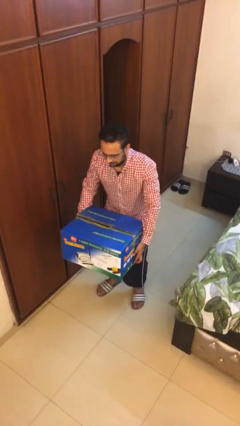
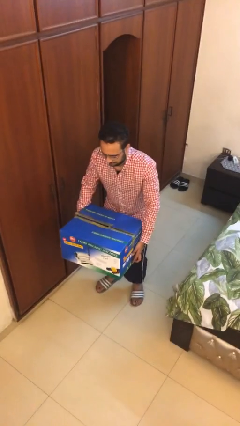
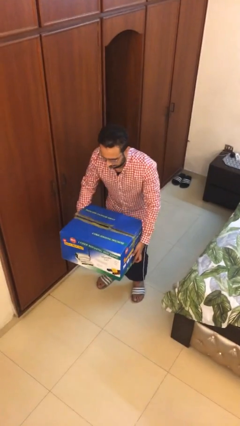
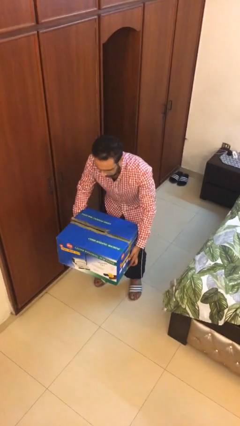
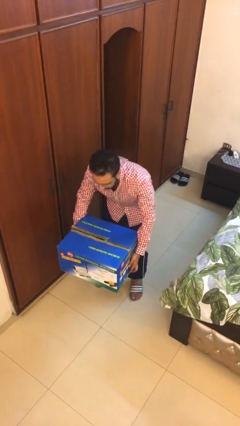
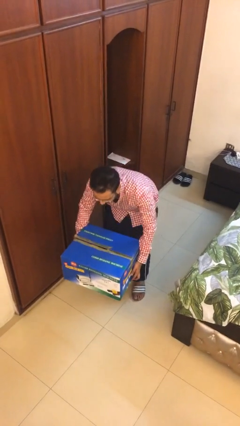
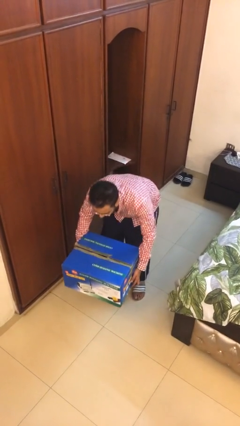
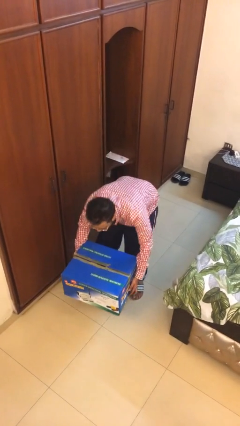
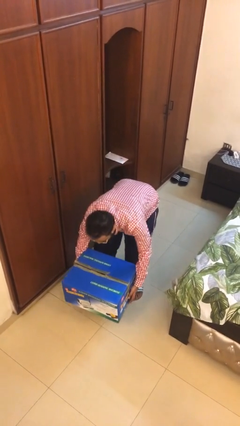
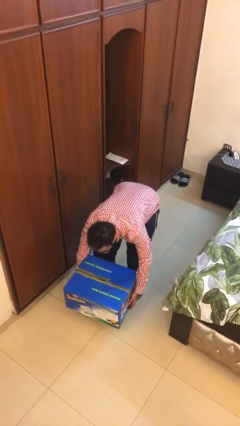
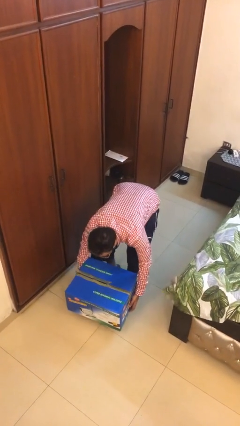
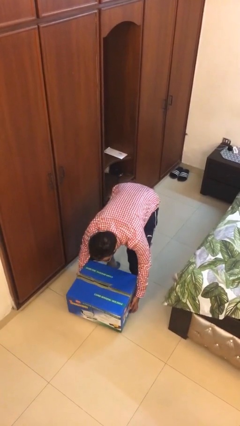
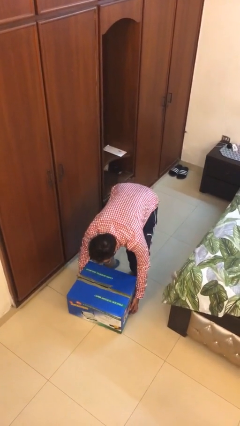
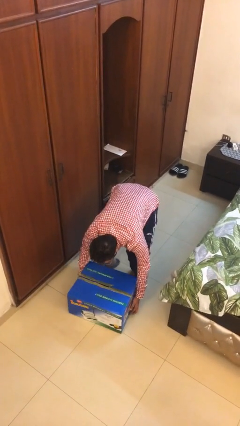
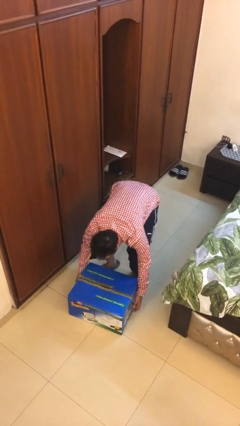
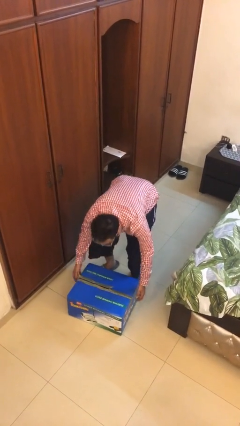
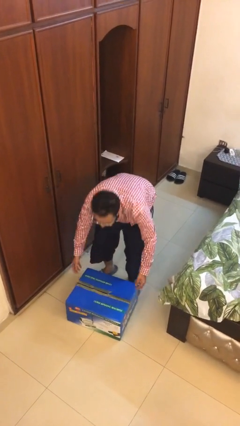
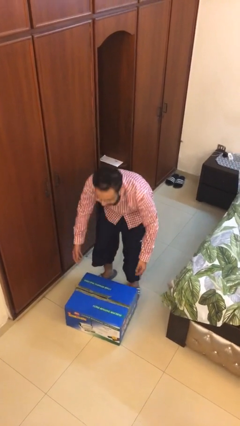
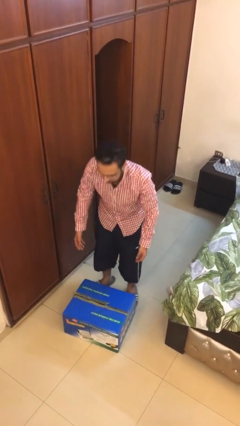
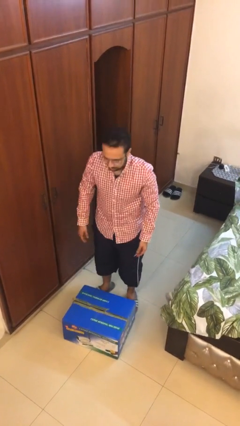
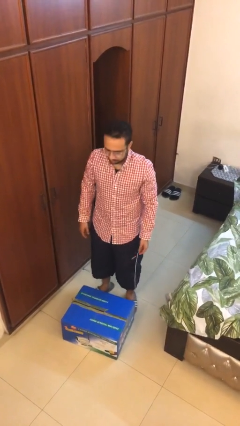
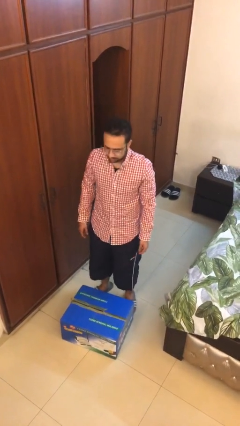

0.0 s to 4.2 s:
person puts down object on floor

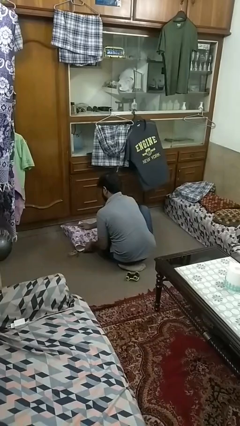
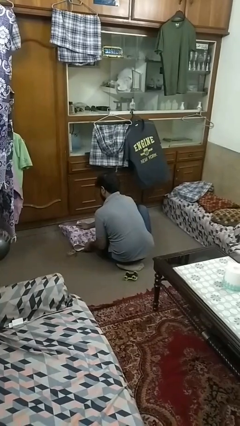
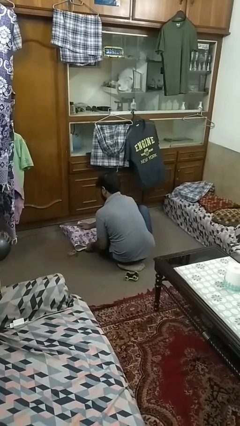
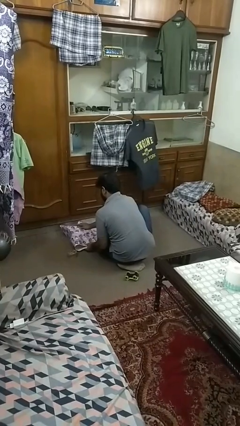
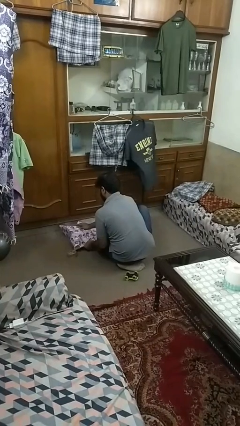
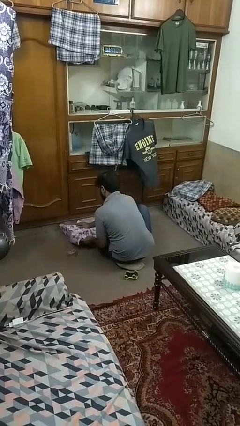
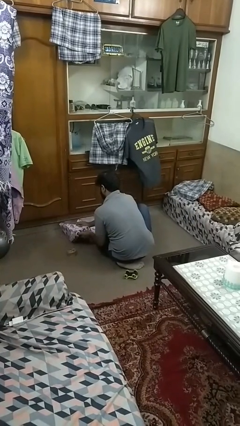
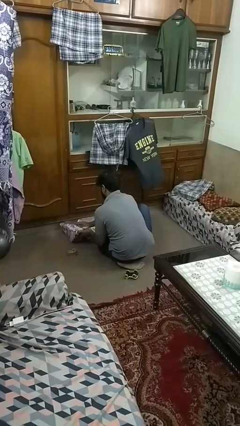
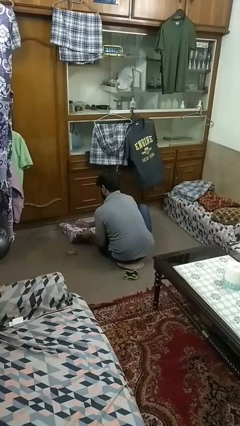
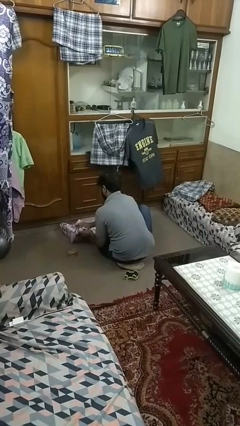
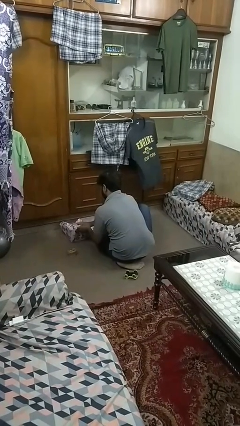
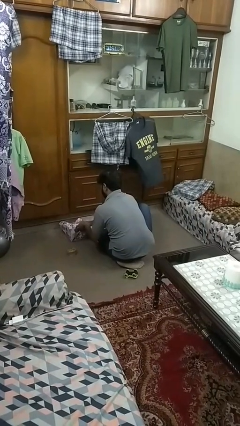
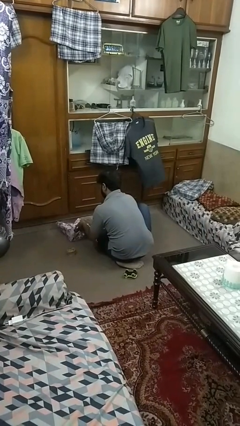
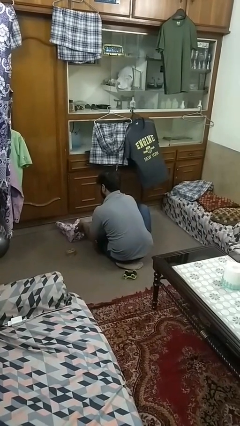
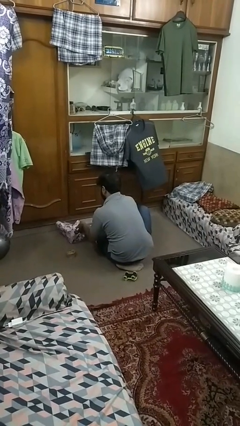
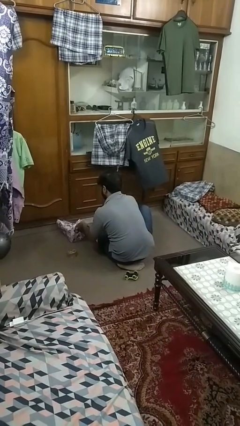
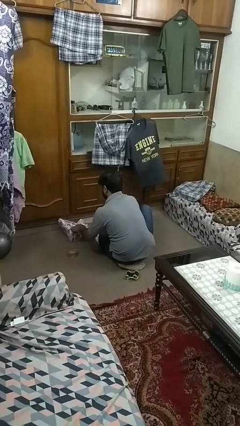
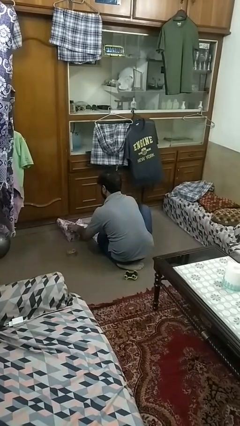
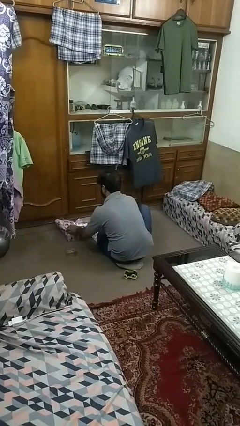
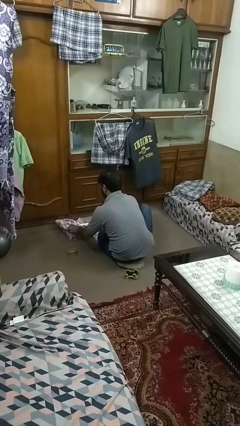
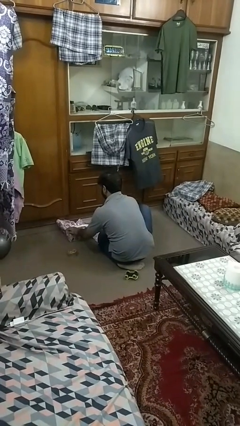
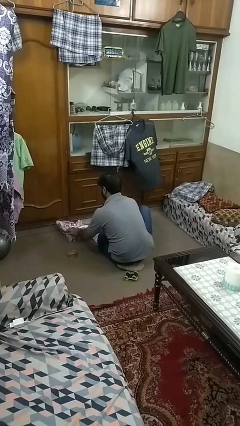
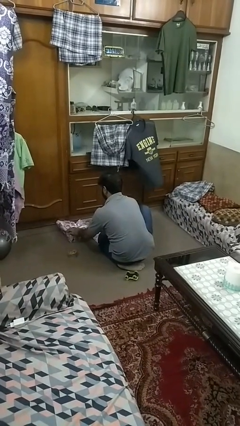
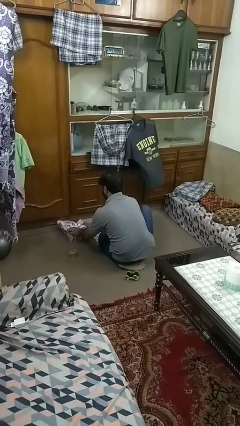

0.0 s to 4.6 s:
person wraps box

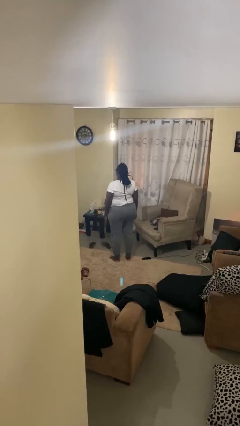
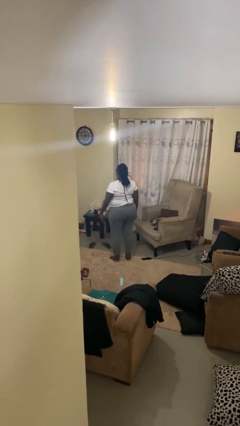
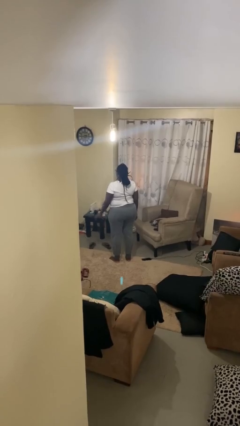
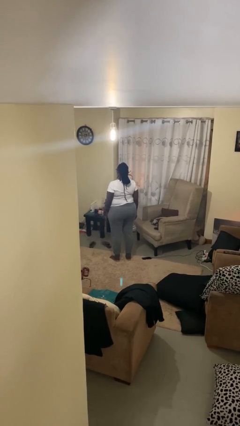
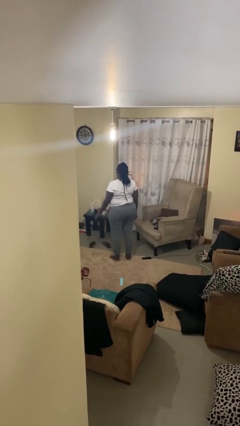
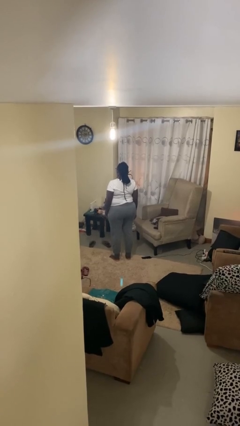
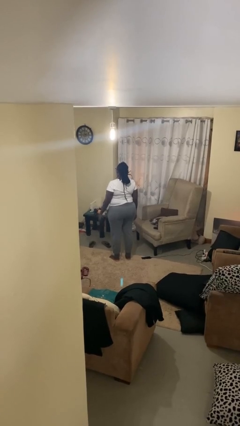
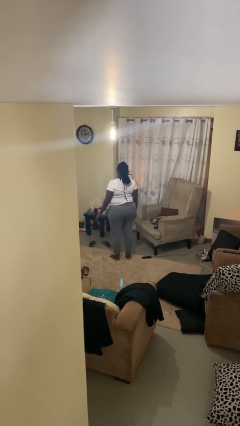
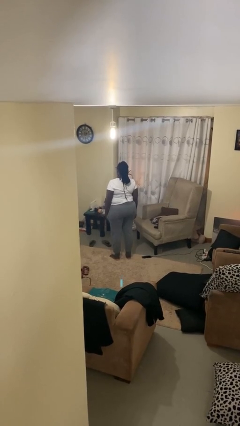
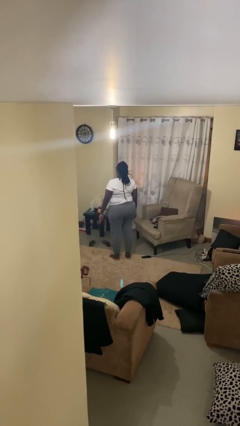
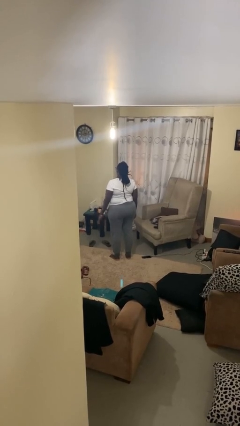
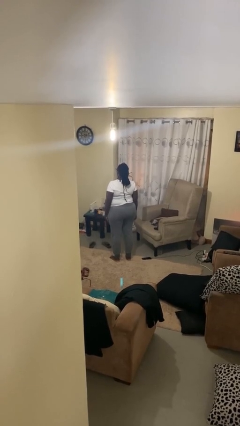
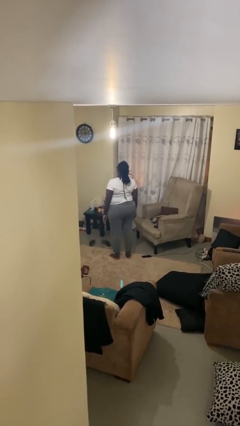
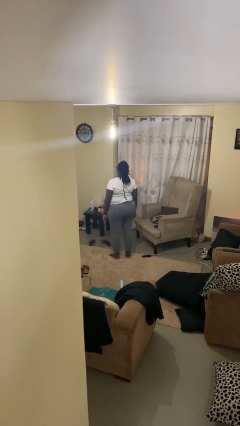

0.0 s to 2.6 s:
person slaps hands on thighs

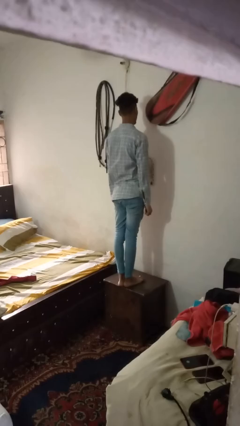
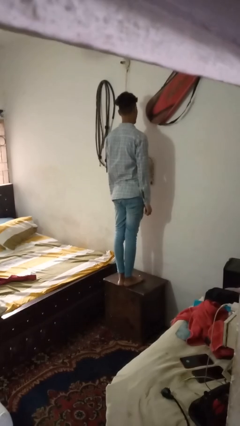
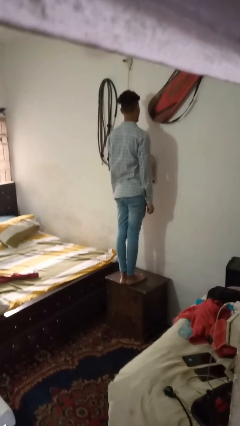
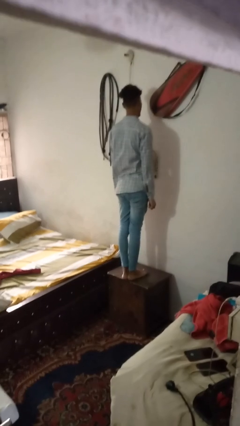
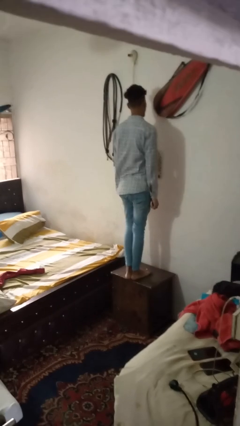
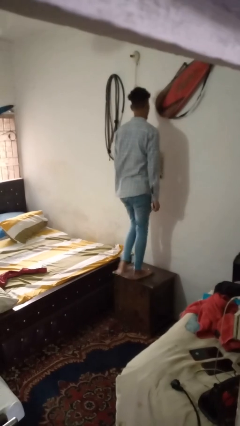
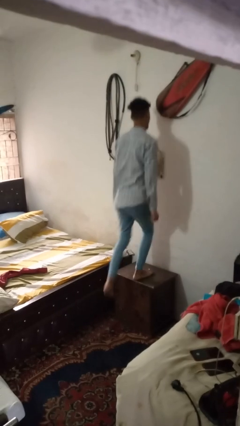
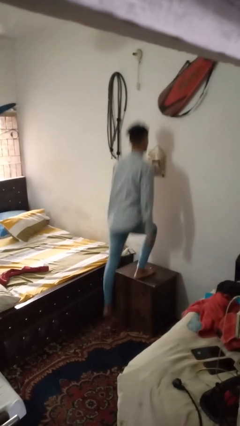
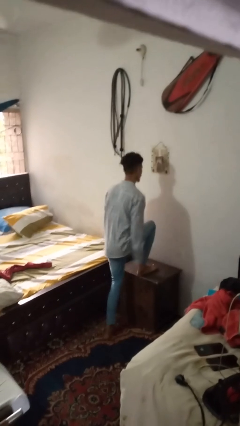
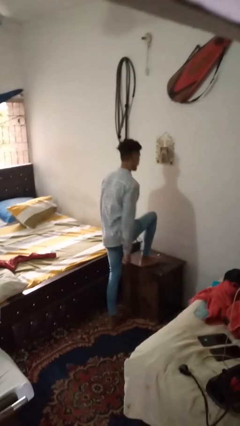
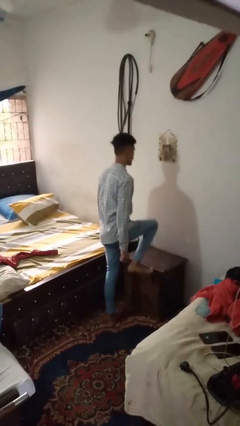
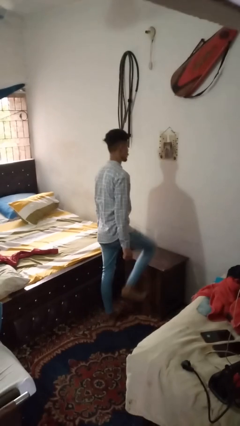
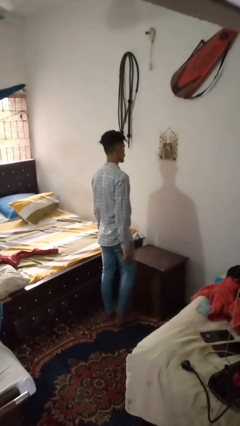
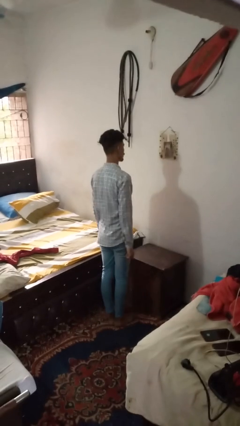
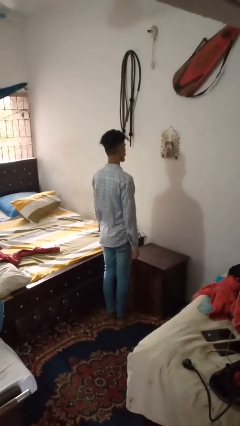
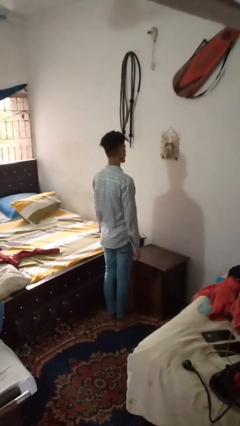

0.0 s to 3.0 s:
person climbs off table

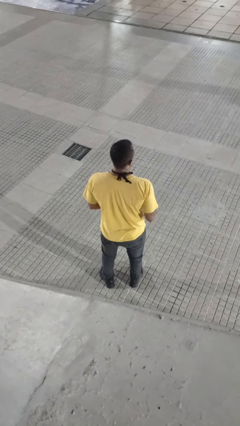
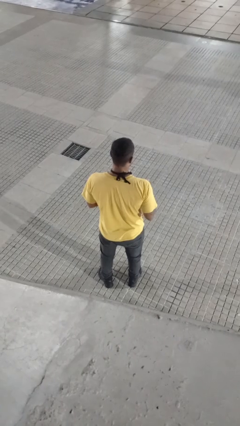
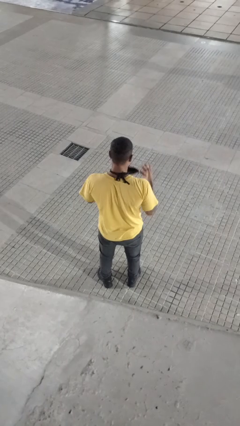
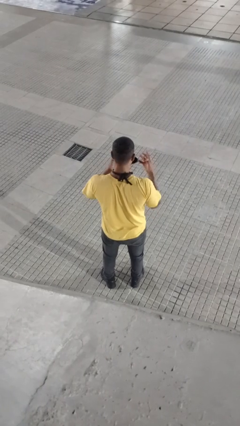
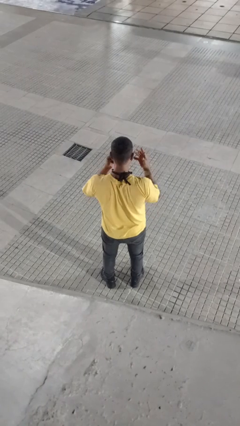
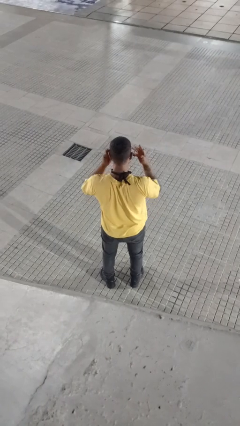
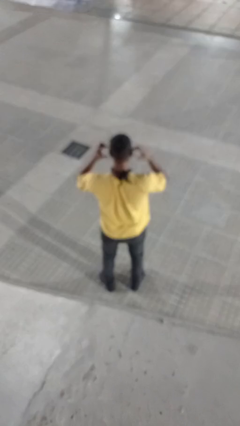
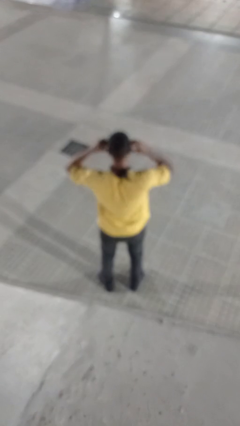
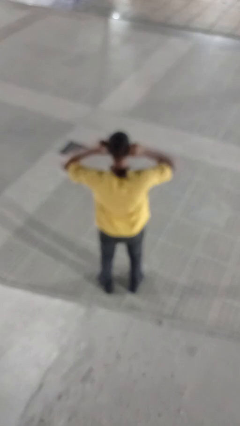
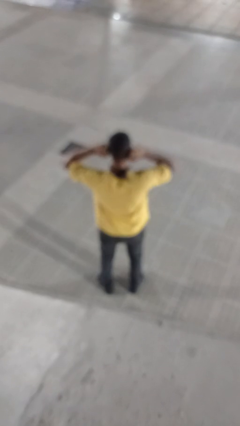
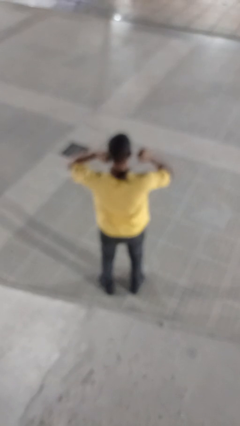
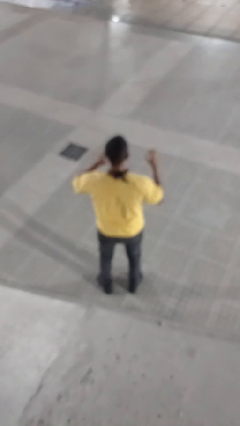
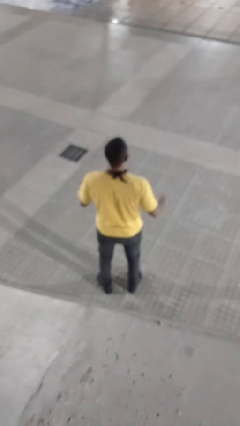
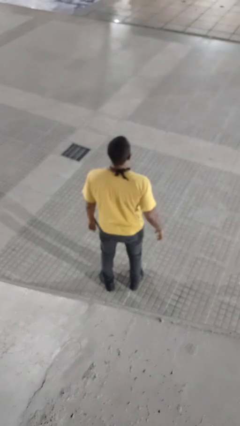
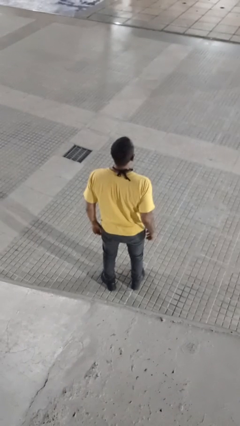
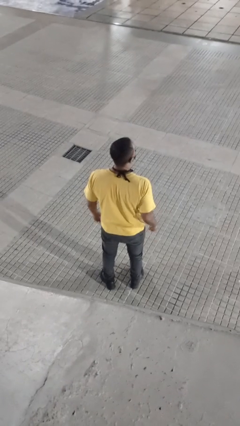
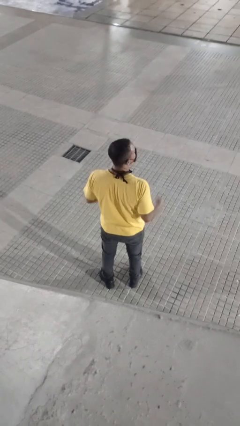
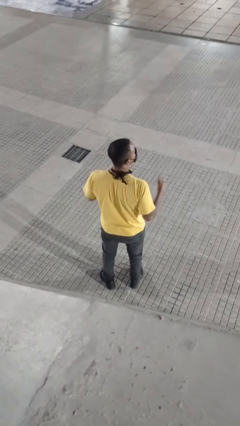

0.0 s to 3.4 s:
person puts on facemask
